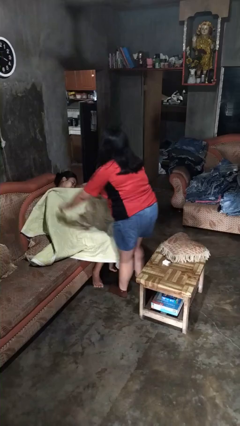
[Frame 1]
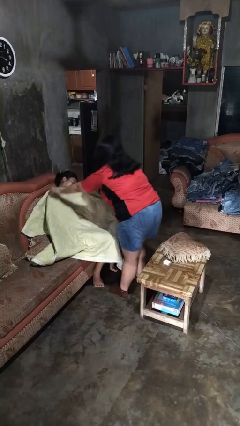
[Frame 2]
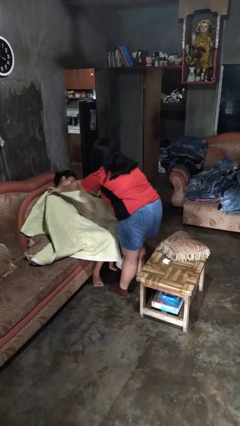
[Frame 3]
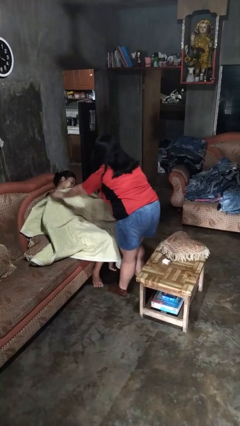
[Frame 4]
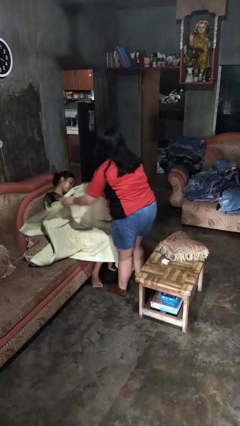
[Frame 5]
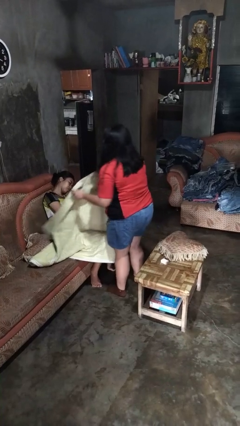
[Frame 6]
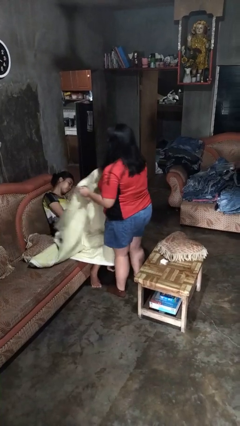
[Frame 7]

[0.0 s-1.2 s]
person uncovers friend with blanket

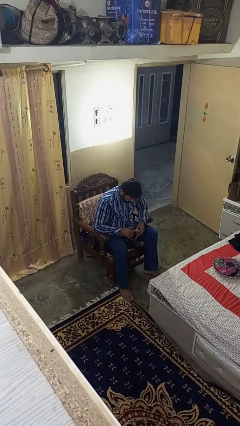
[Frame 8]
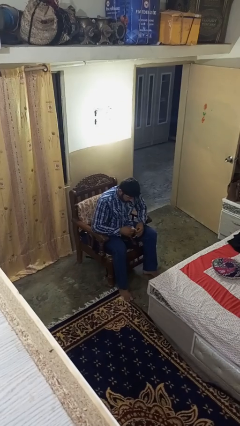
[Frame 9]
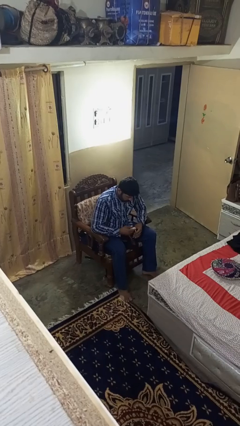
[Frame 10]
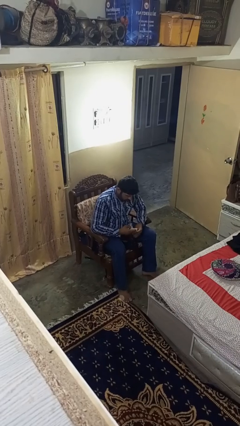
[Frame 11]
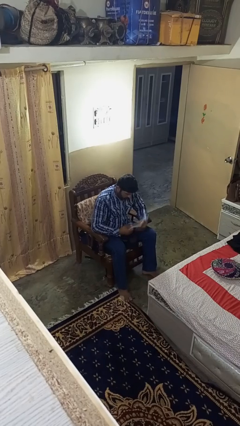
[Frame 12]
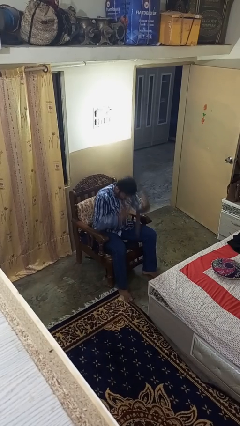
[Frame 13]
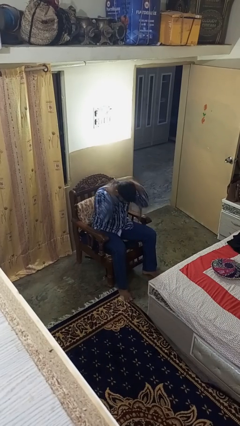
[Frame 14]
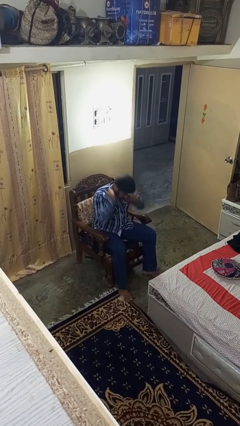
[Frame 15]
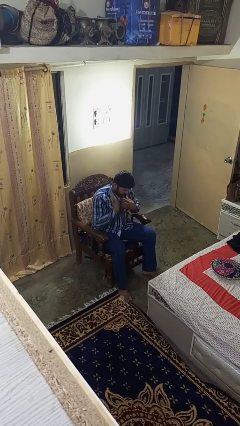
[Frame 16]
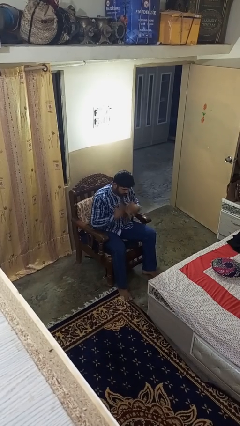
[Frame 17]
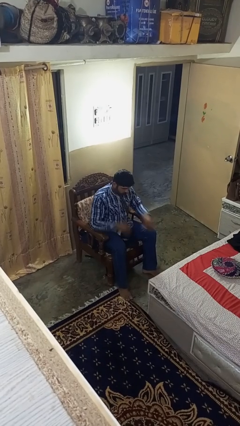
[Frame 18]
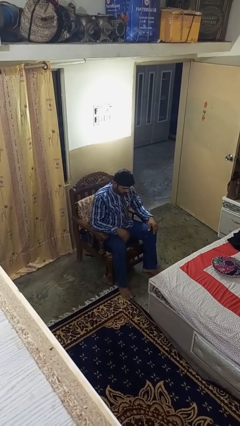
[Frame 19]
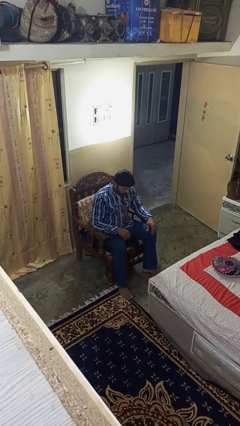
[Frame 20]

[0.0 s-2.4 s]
person puts on necktie

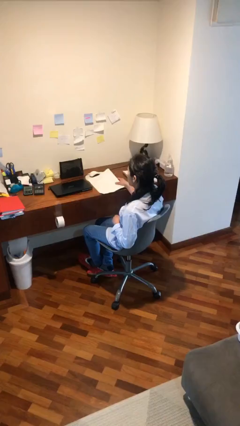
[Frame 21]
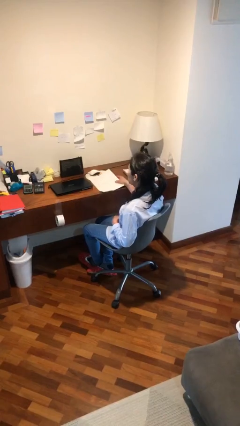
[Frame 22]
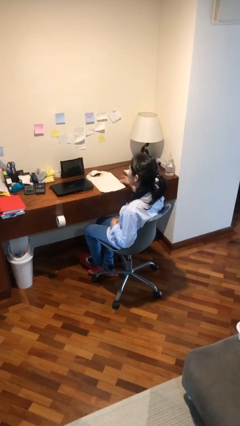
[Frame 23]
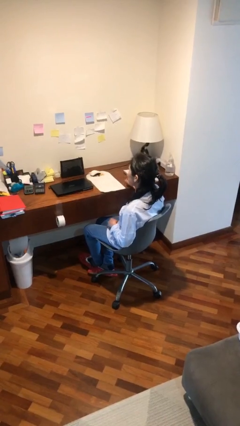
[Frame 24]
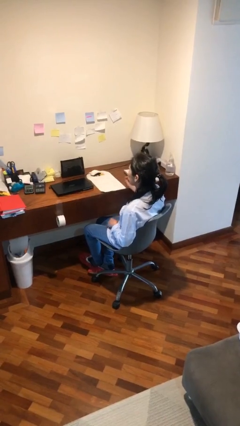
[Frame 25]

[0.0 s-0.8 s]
person puts down object on table

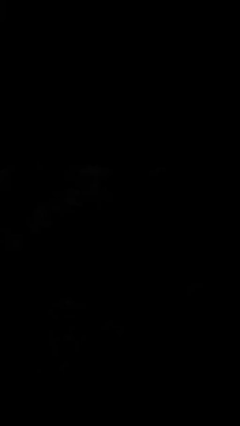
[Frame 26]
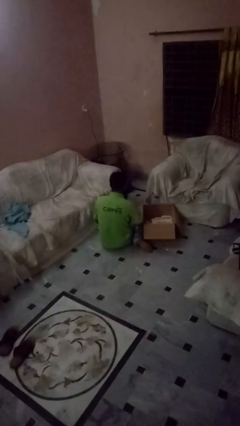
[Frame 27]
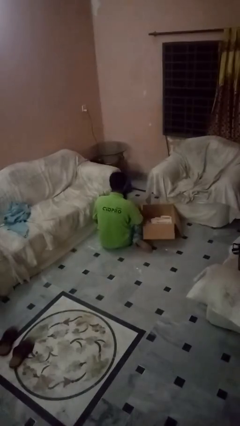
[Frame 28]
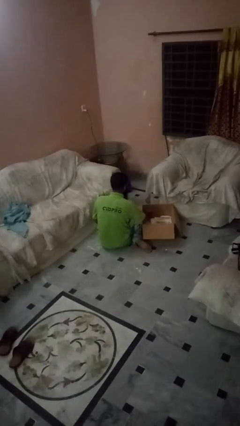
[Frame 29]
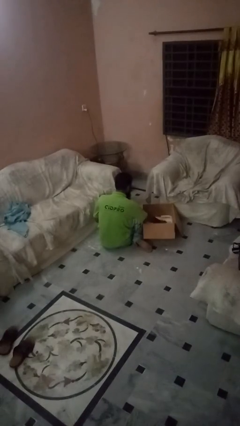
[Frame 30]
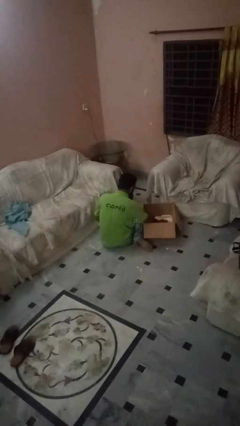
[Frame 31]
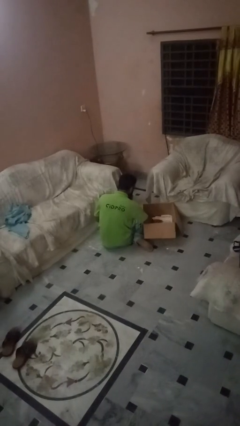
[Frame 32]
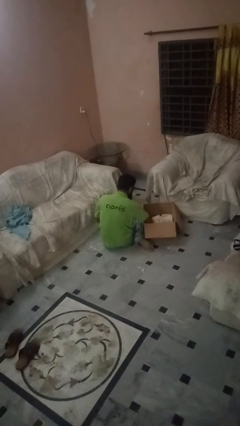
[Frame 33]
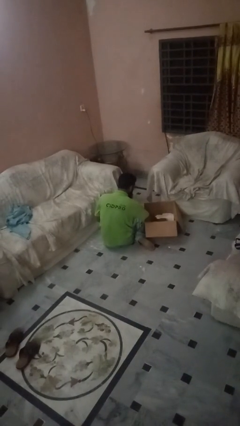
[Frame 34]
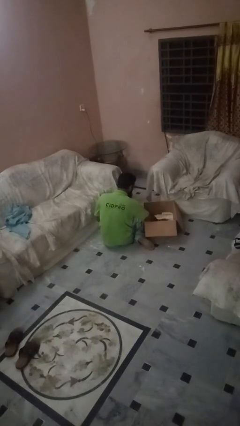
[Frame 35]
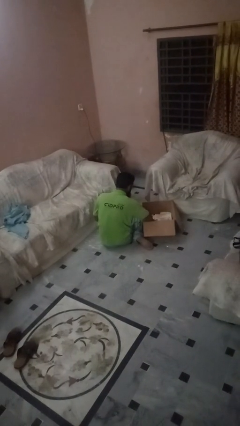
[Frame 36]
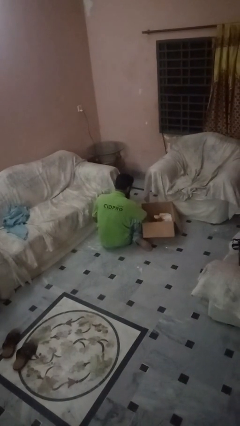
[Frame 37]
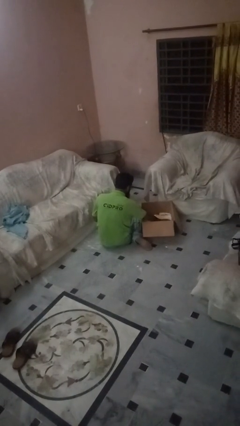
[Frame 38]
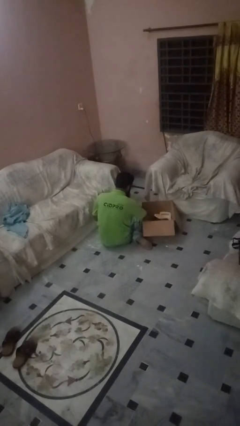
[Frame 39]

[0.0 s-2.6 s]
person searches in box

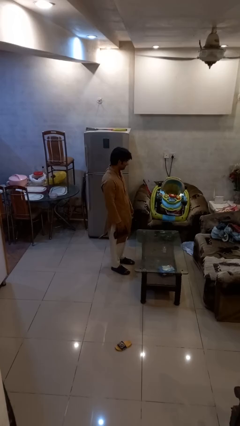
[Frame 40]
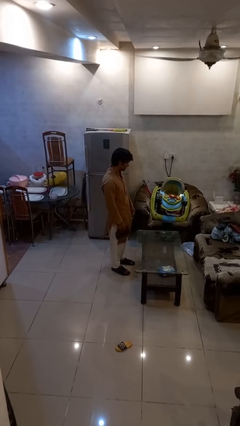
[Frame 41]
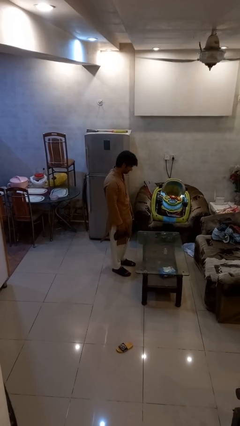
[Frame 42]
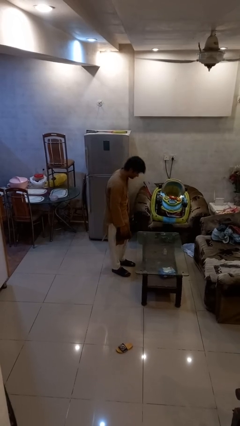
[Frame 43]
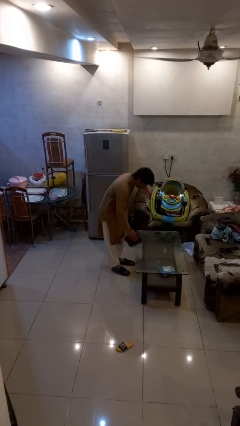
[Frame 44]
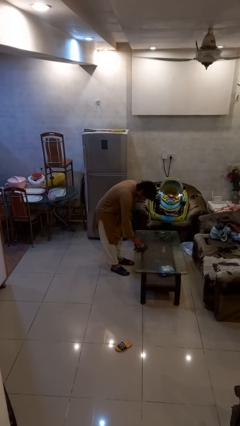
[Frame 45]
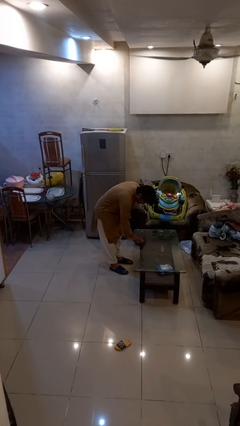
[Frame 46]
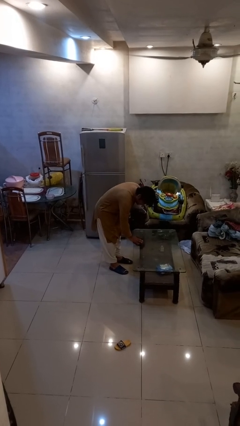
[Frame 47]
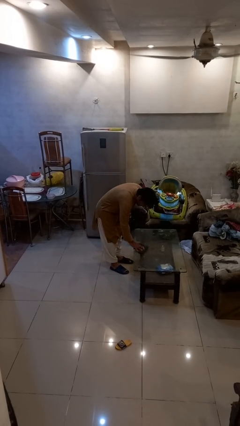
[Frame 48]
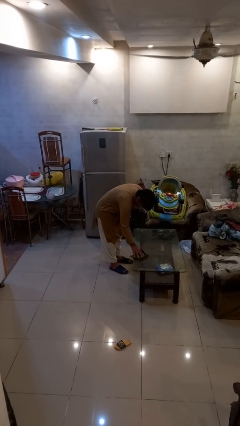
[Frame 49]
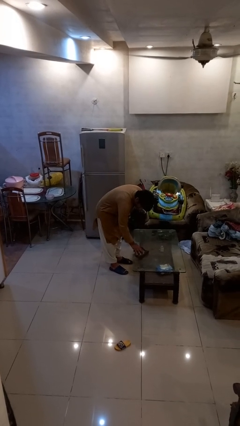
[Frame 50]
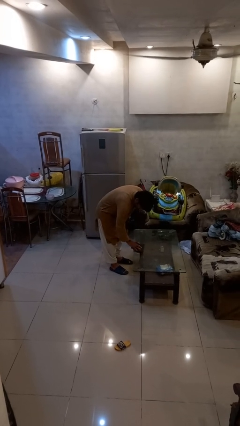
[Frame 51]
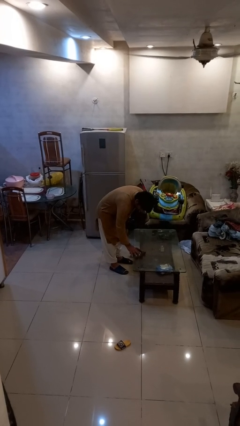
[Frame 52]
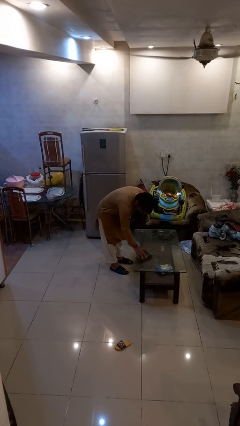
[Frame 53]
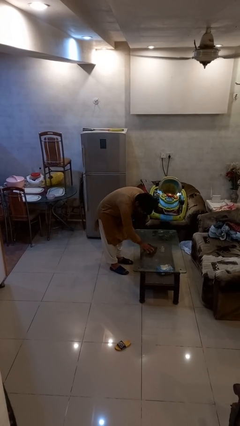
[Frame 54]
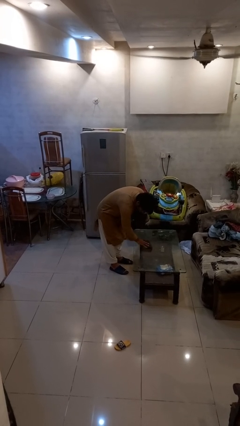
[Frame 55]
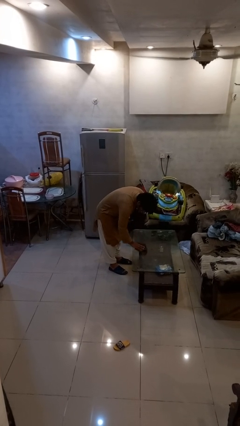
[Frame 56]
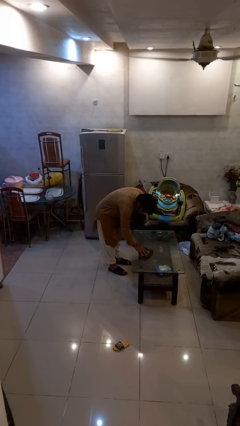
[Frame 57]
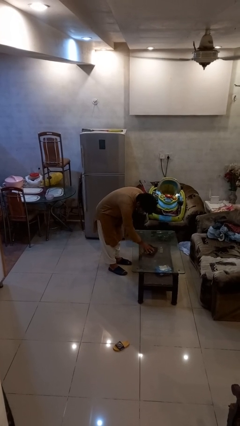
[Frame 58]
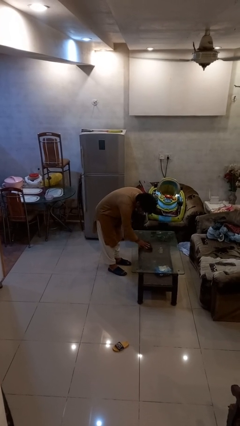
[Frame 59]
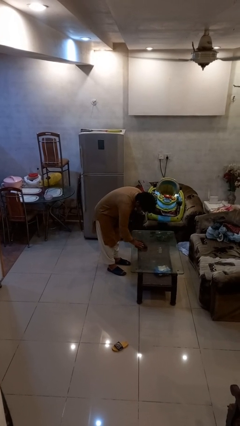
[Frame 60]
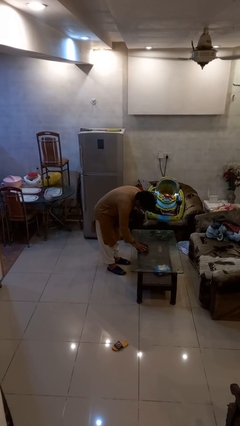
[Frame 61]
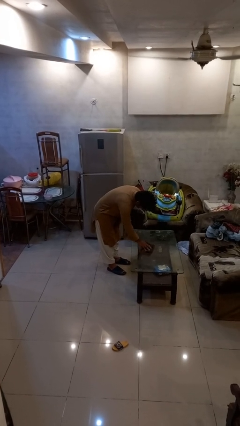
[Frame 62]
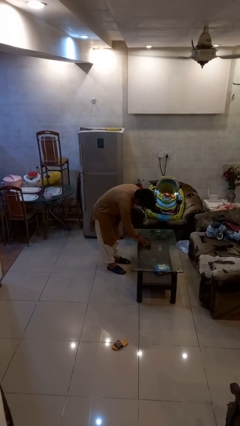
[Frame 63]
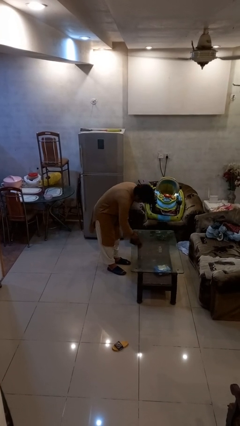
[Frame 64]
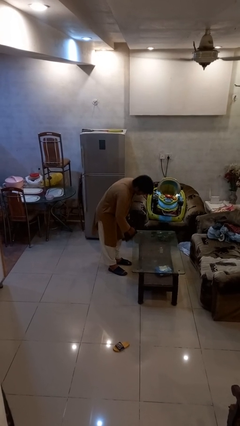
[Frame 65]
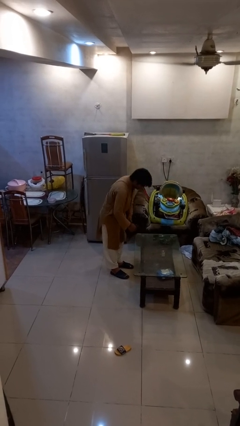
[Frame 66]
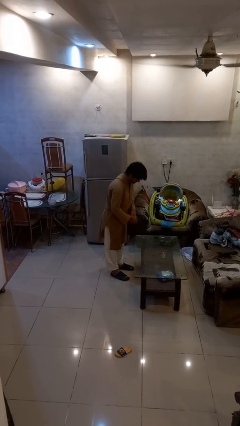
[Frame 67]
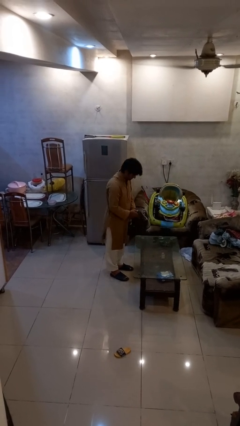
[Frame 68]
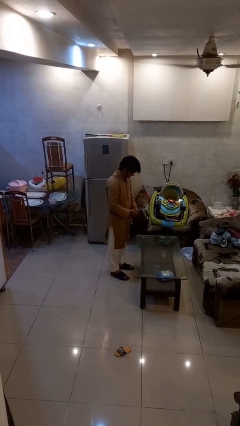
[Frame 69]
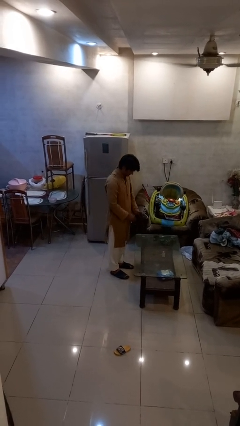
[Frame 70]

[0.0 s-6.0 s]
person cleans table with rag

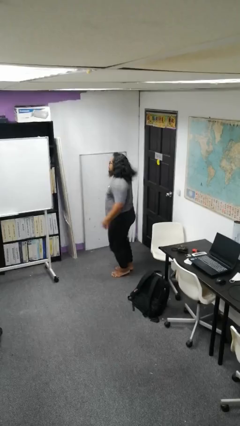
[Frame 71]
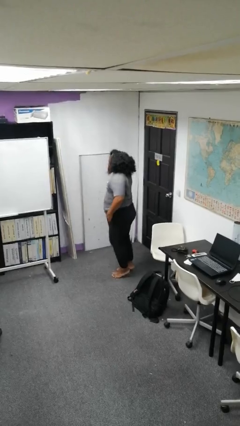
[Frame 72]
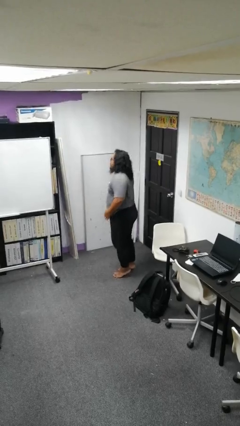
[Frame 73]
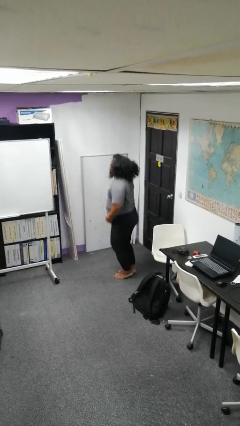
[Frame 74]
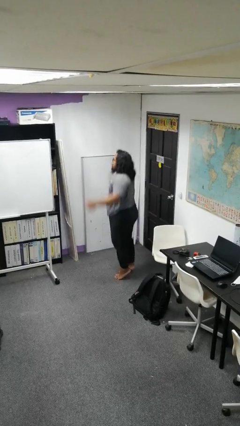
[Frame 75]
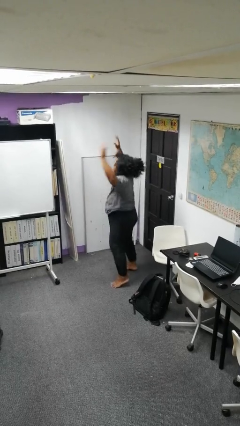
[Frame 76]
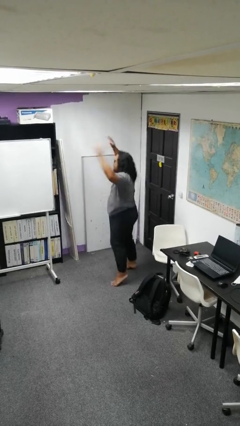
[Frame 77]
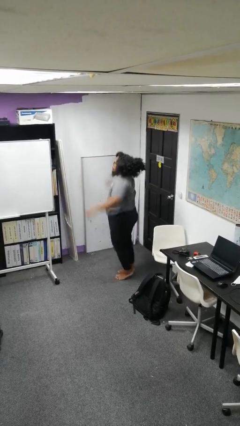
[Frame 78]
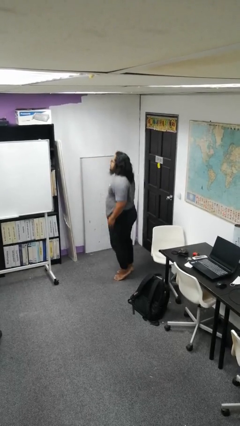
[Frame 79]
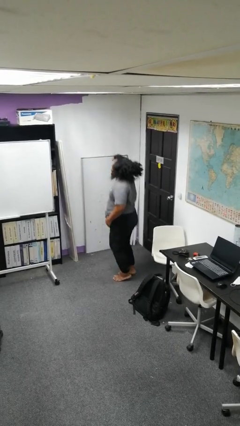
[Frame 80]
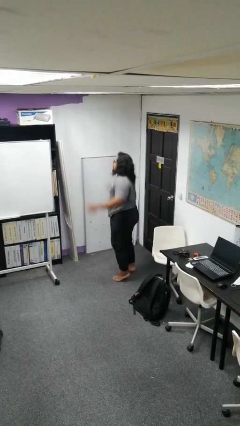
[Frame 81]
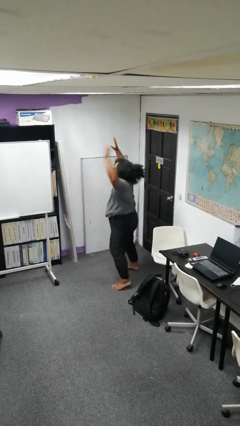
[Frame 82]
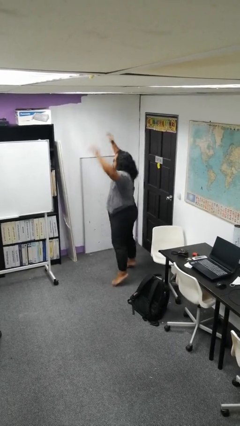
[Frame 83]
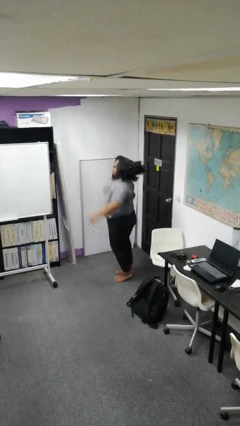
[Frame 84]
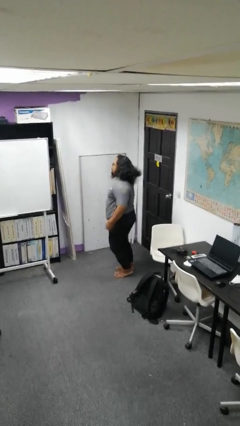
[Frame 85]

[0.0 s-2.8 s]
person exercises with jumping jacks

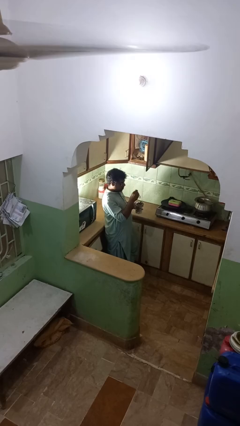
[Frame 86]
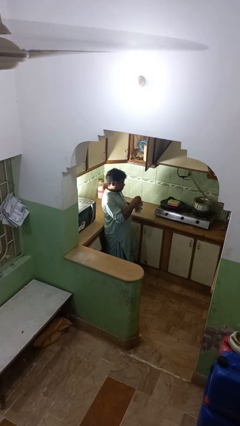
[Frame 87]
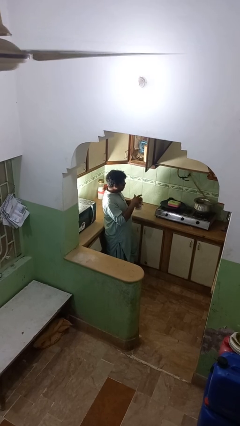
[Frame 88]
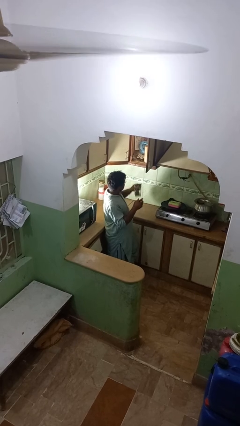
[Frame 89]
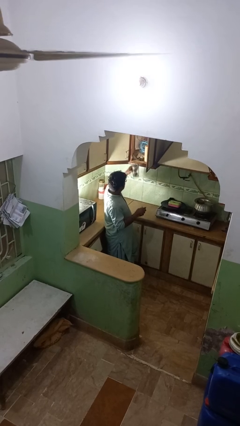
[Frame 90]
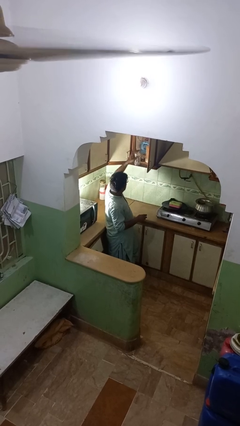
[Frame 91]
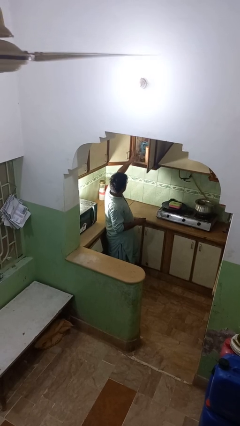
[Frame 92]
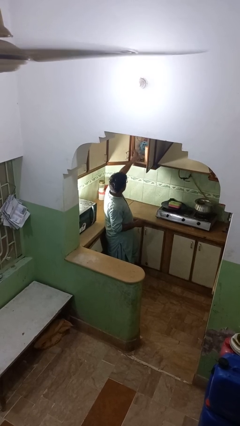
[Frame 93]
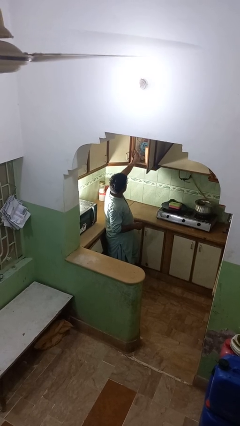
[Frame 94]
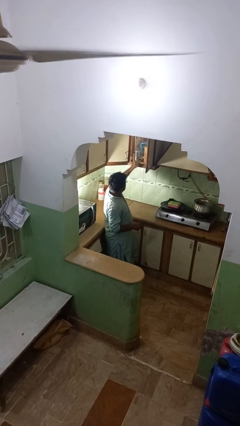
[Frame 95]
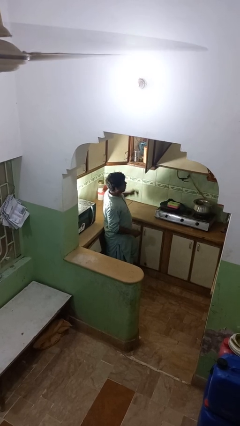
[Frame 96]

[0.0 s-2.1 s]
person puts object into kitchen drawer
